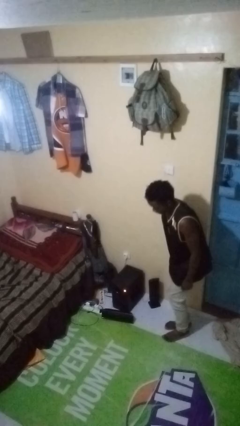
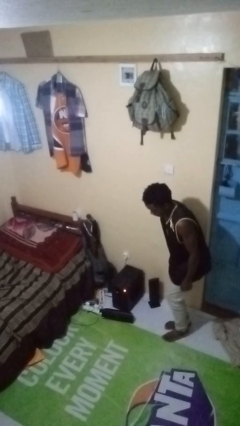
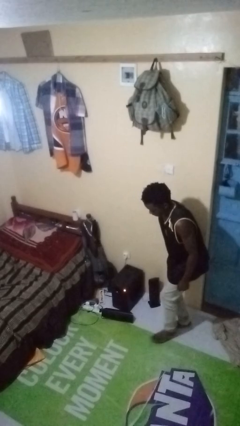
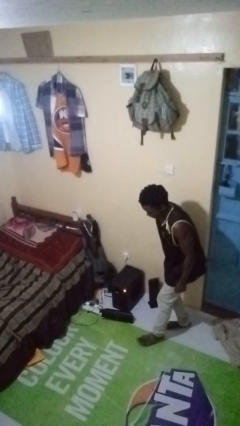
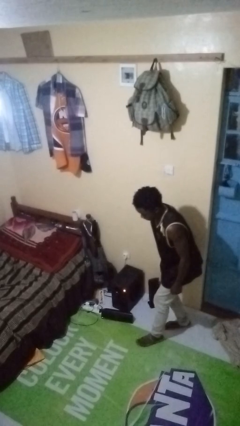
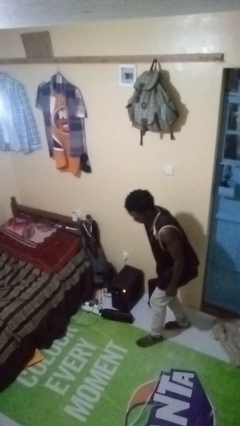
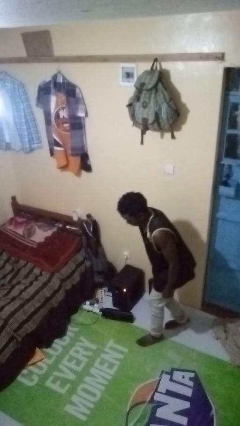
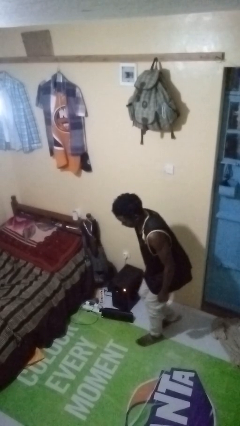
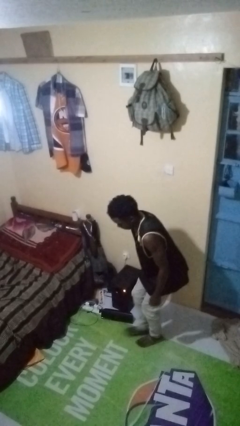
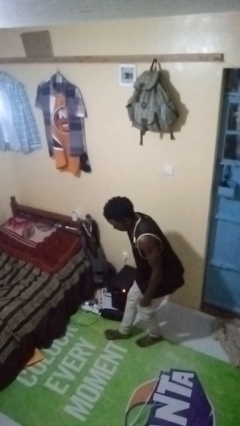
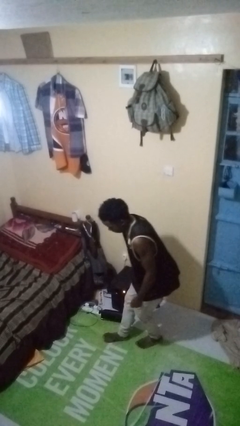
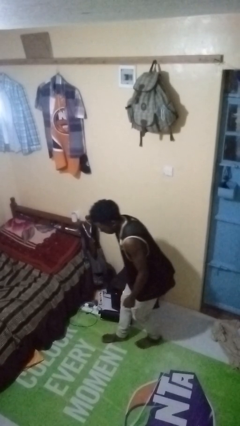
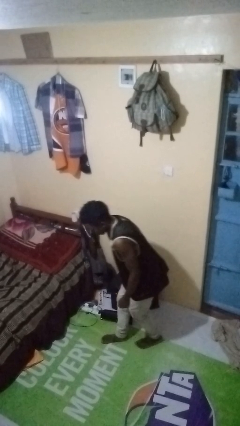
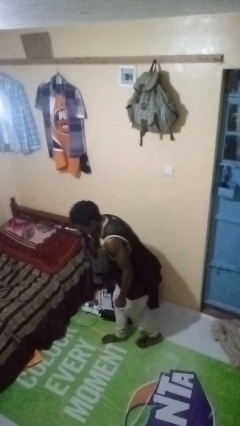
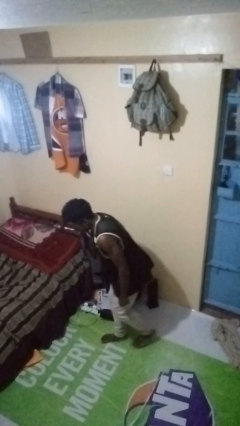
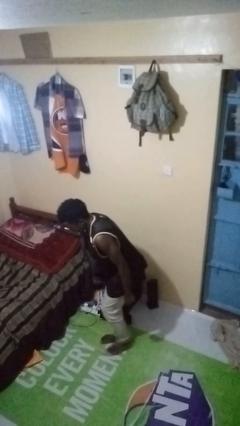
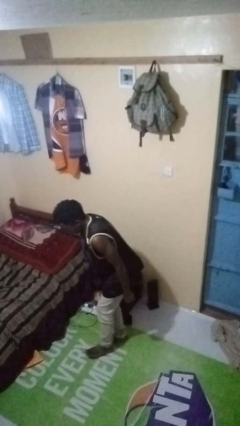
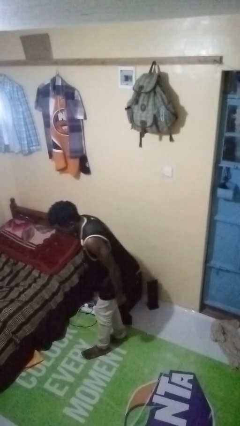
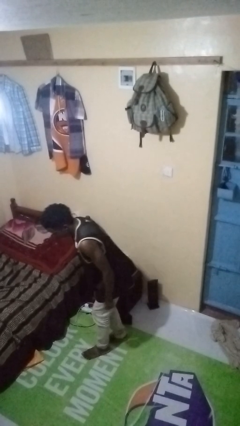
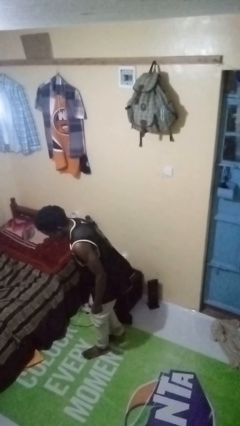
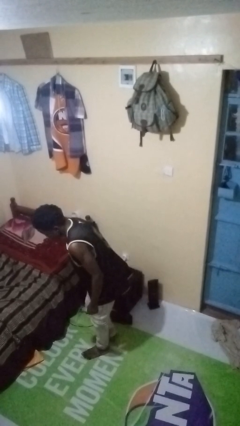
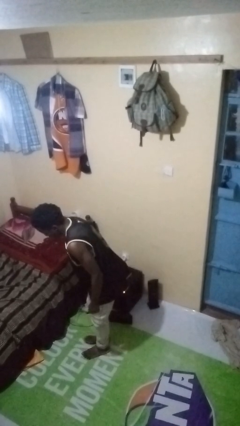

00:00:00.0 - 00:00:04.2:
person walks tiptoe

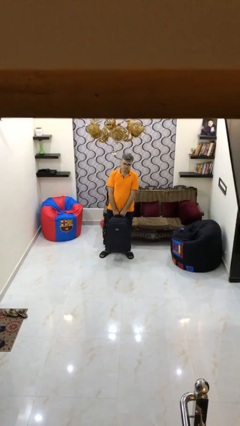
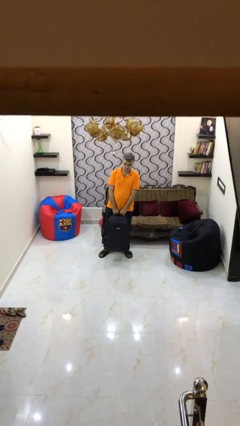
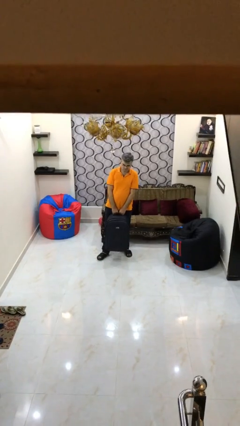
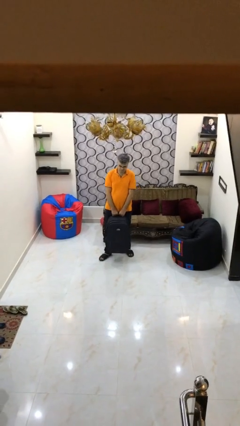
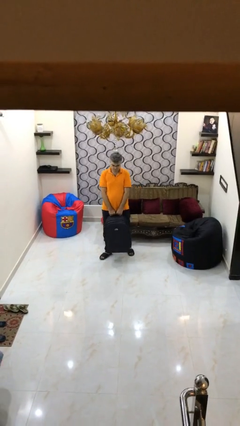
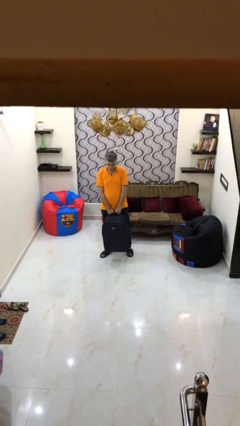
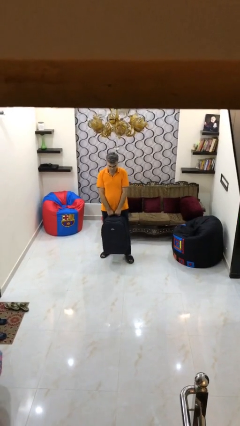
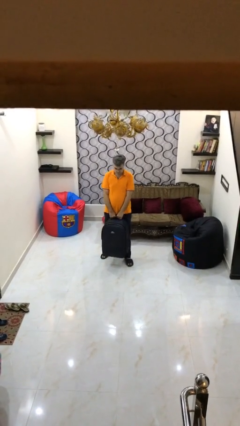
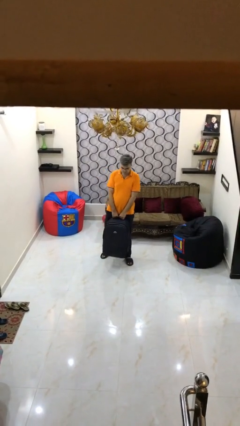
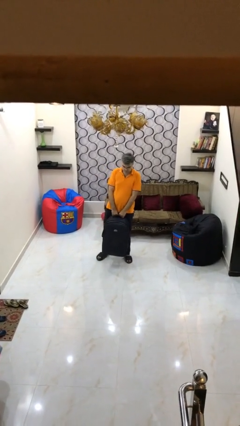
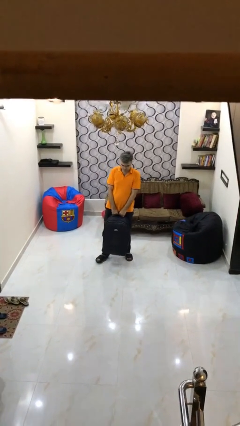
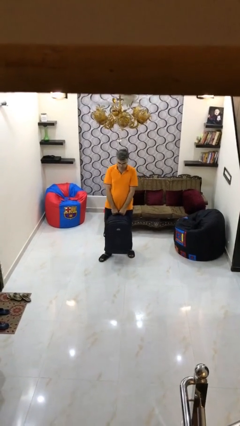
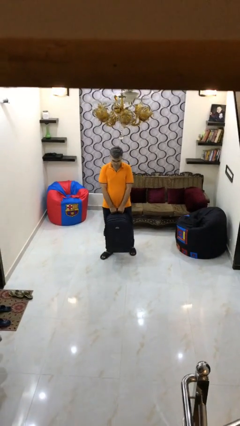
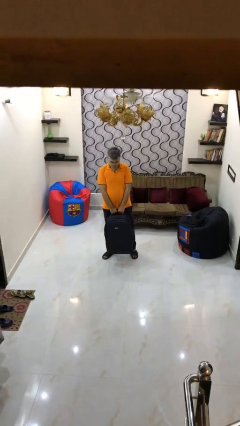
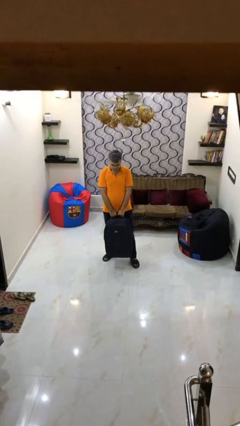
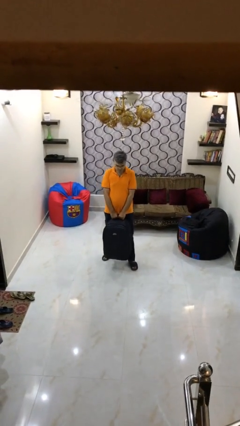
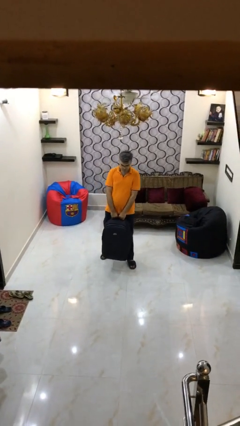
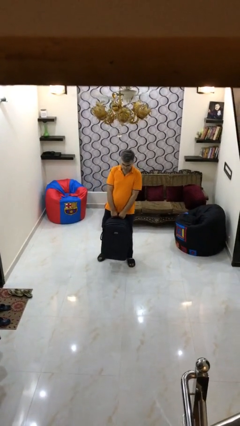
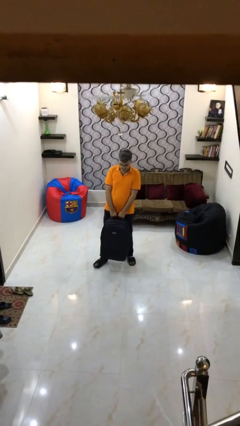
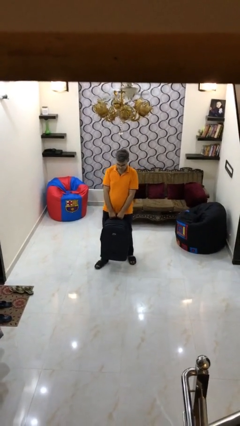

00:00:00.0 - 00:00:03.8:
person carries heavy object

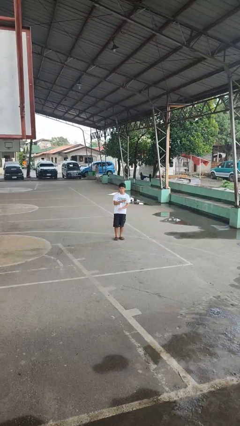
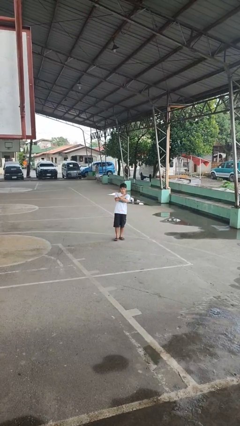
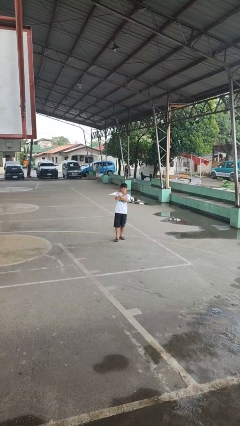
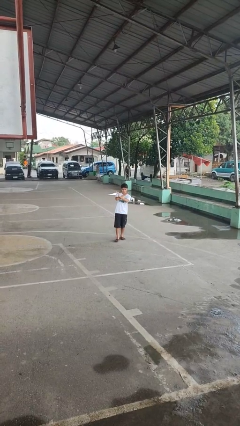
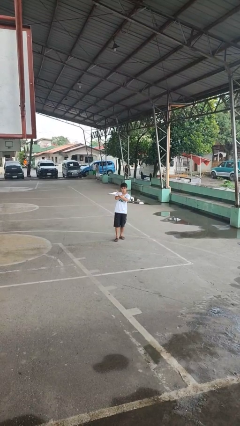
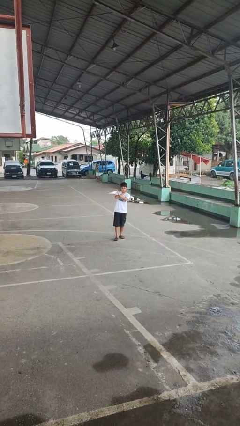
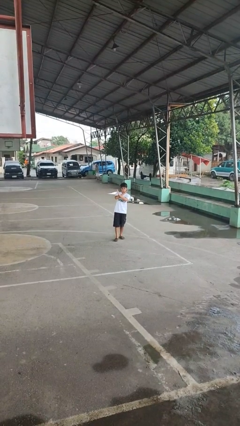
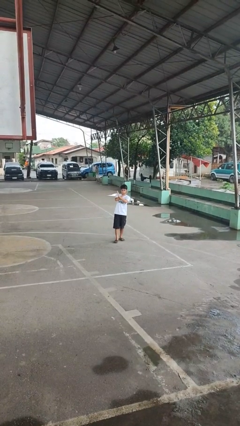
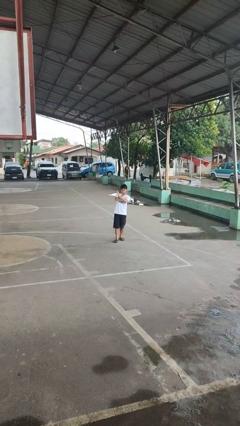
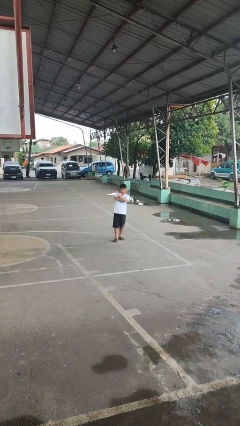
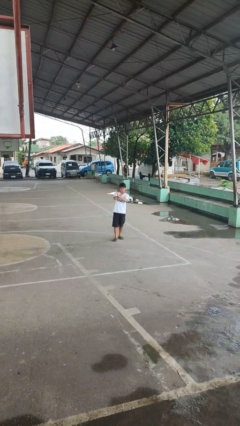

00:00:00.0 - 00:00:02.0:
person gestures arms x

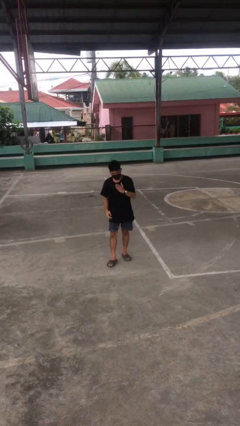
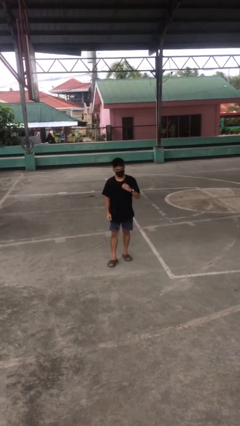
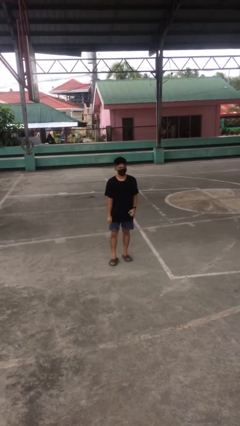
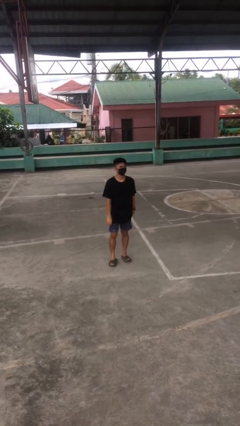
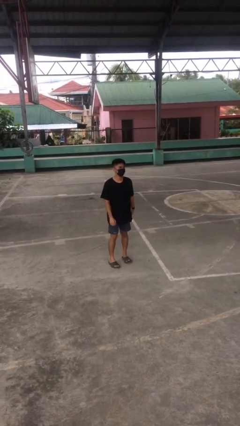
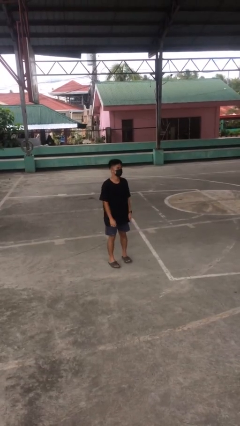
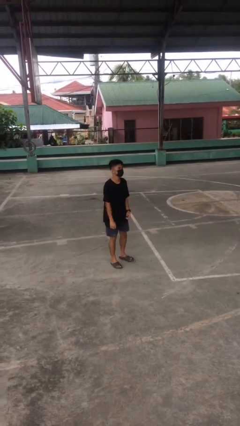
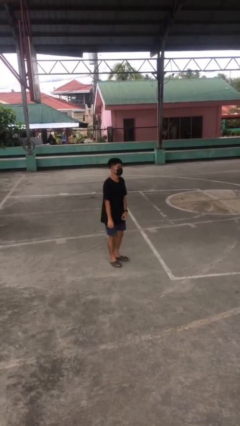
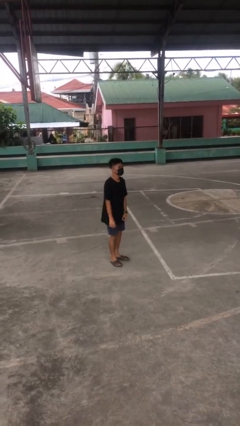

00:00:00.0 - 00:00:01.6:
person karate chop

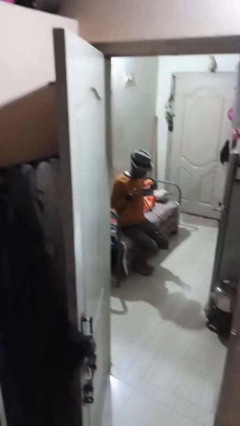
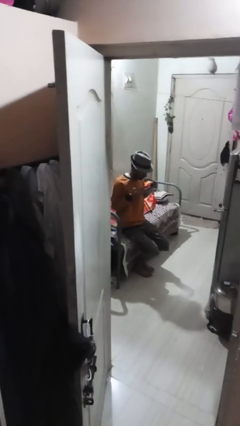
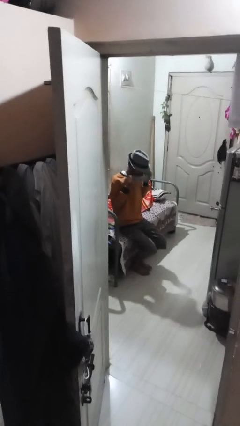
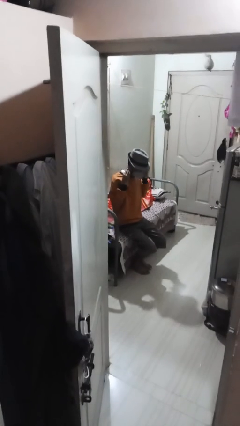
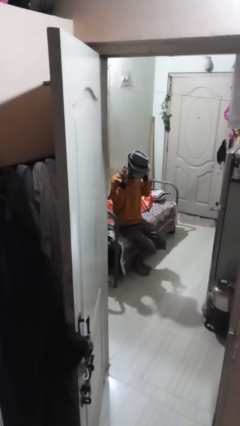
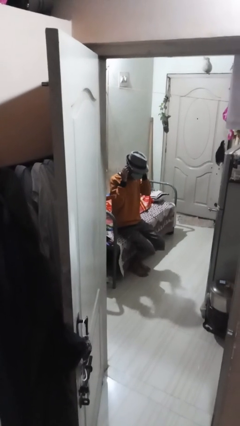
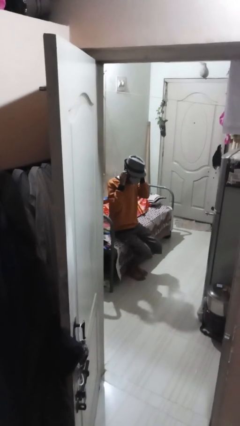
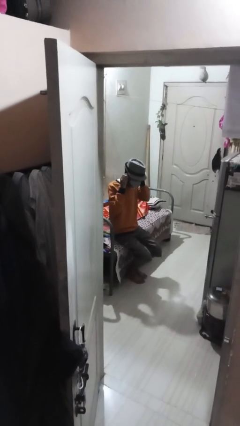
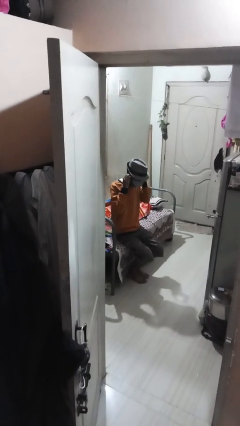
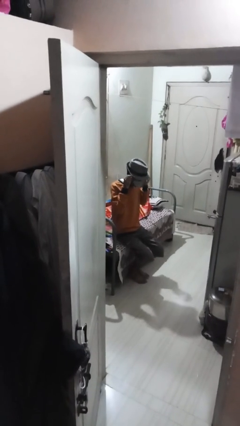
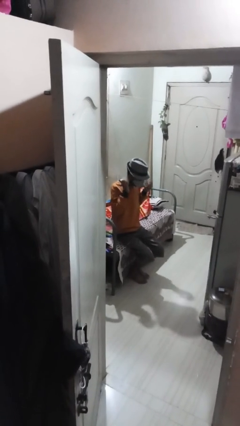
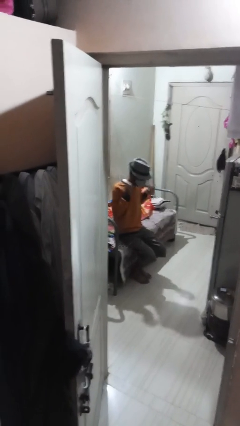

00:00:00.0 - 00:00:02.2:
person puts on facemask

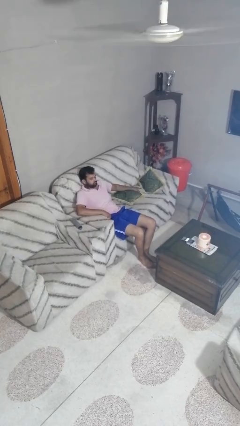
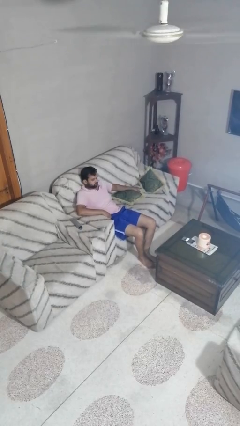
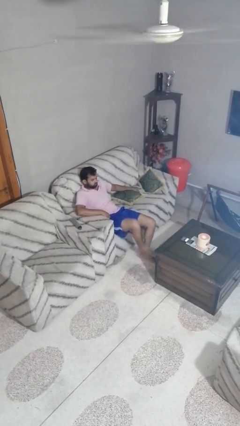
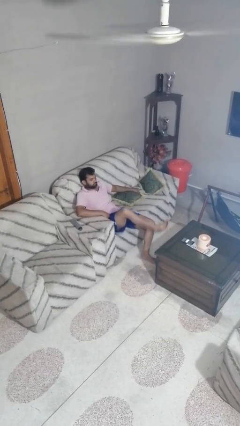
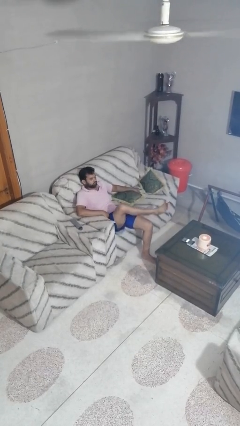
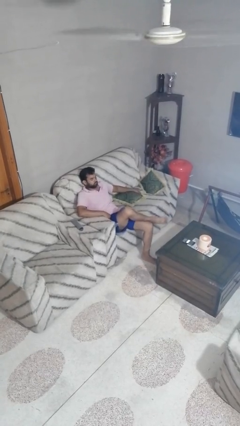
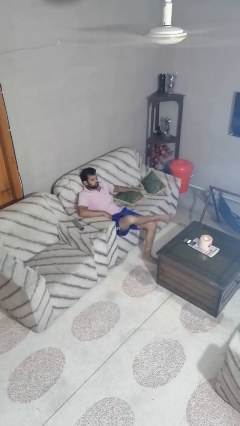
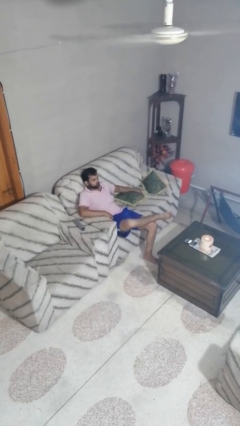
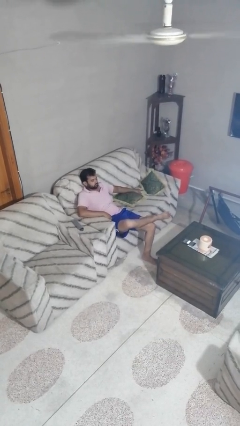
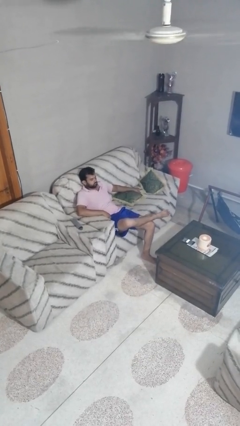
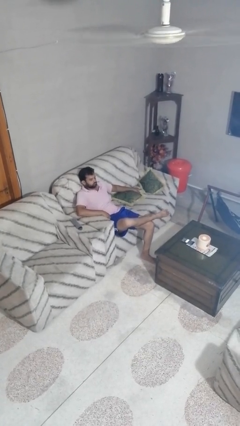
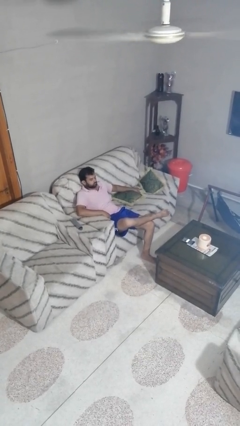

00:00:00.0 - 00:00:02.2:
person crosses legs

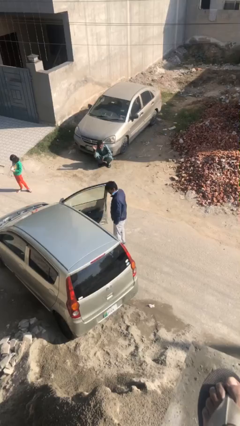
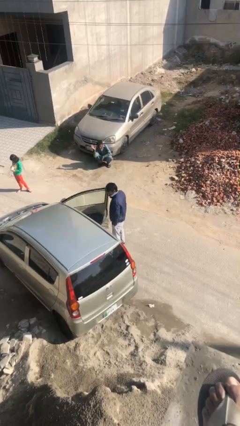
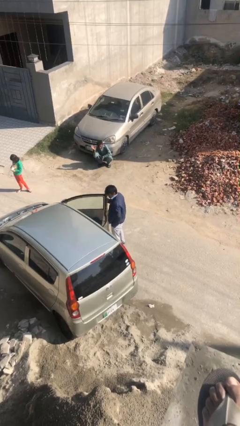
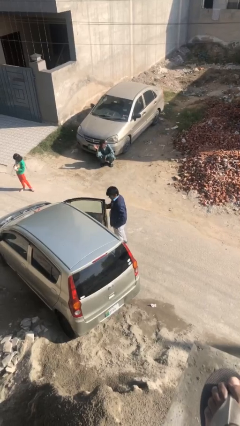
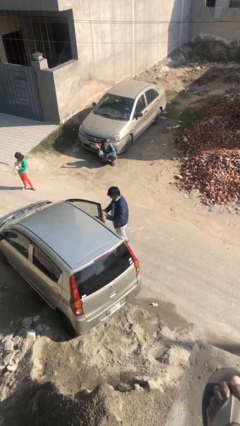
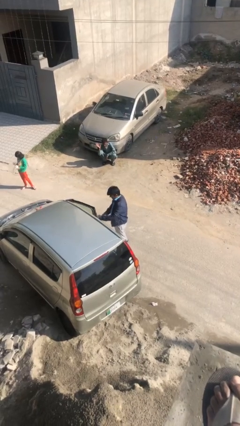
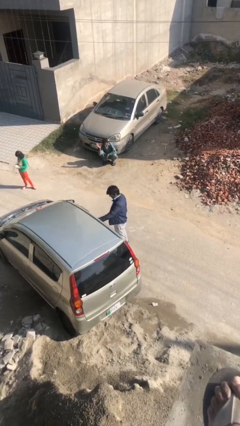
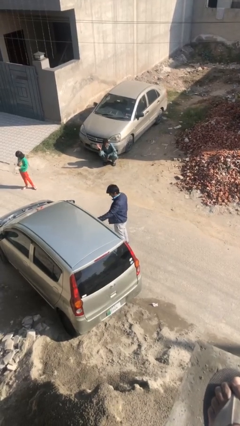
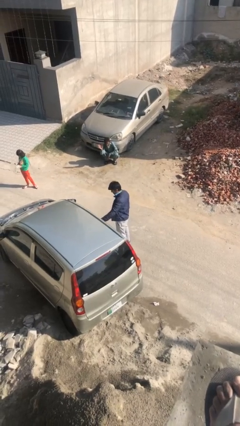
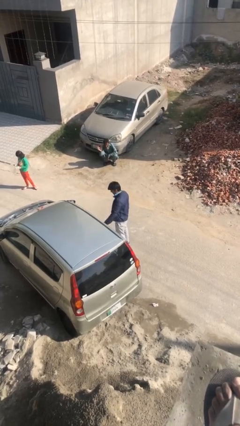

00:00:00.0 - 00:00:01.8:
person closes car door
